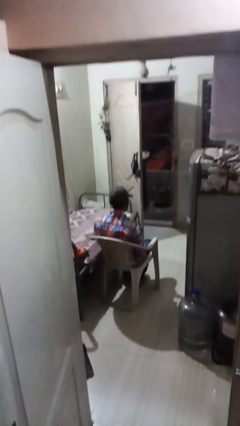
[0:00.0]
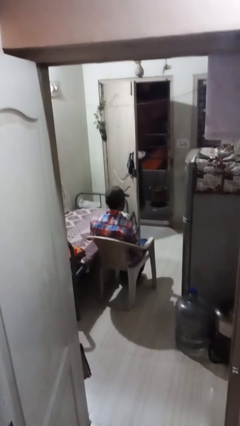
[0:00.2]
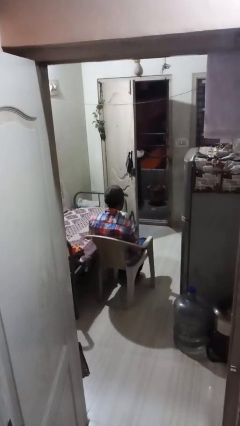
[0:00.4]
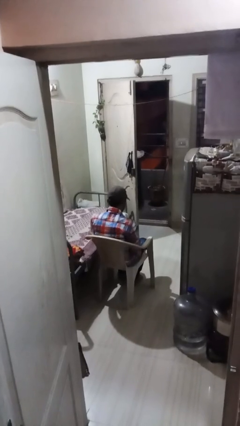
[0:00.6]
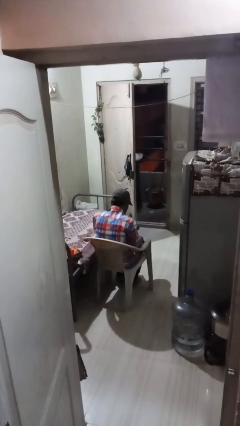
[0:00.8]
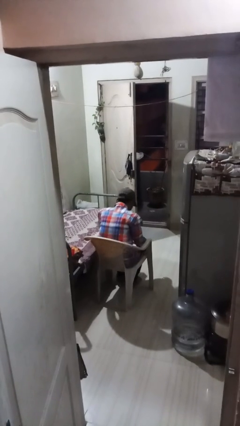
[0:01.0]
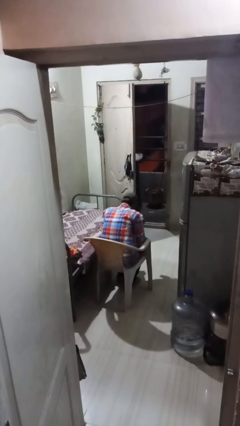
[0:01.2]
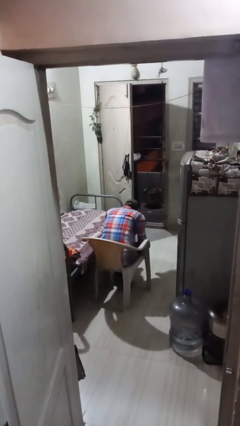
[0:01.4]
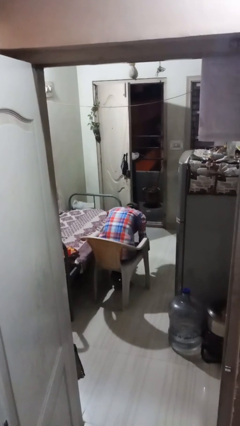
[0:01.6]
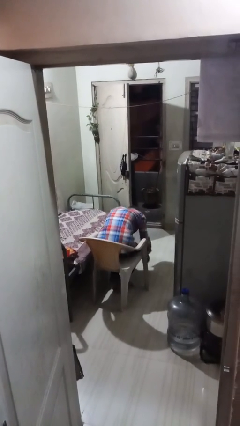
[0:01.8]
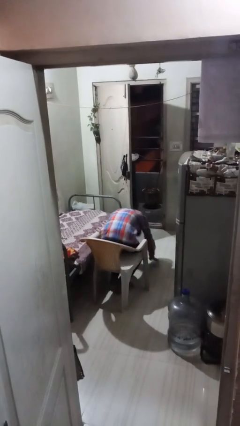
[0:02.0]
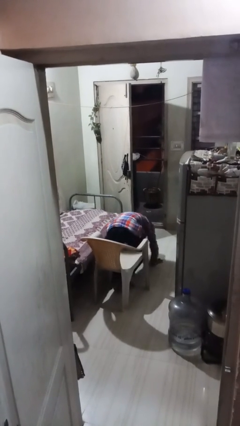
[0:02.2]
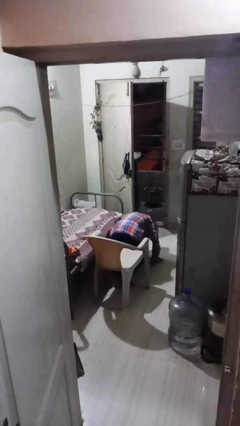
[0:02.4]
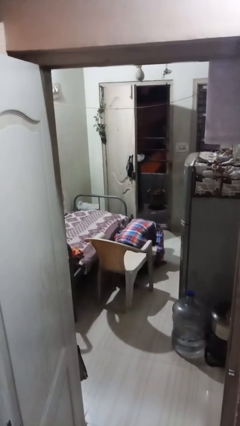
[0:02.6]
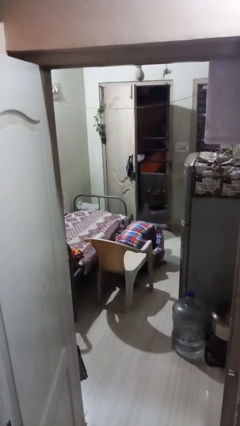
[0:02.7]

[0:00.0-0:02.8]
person falls from chair

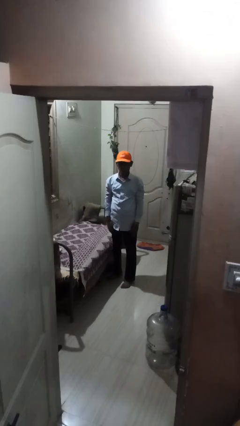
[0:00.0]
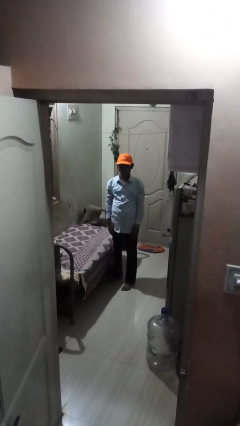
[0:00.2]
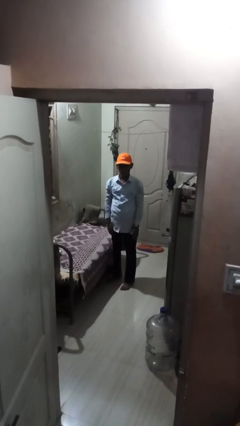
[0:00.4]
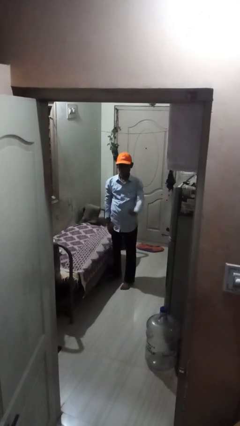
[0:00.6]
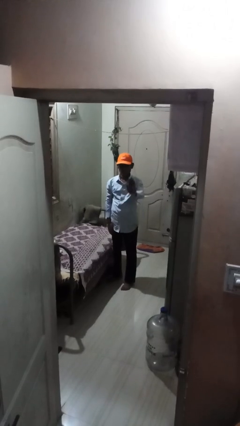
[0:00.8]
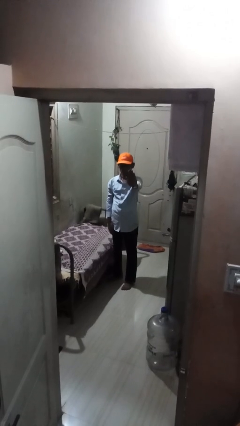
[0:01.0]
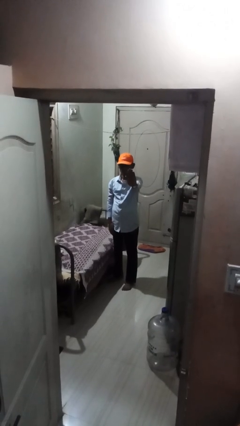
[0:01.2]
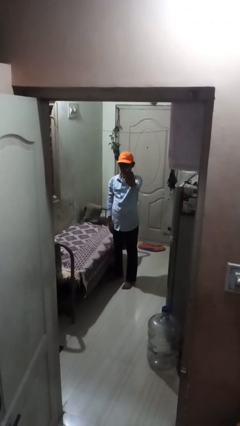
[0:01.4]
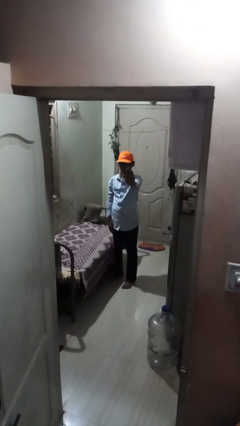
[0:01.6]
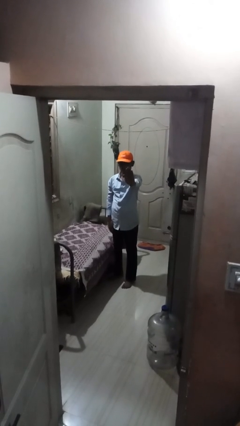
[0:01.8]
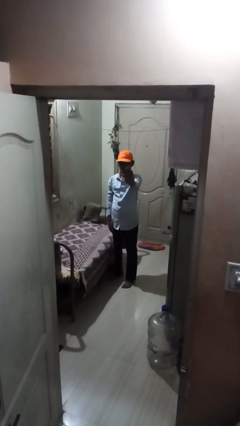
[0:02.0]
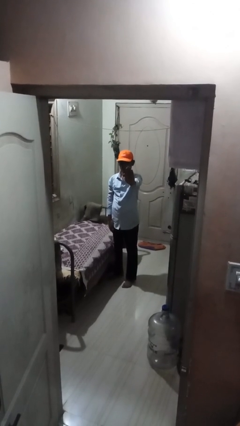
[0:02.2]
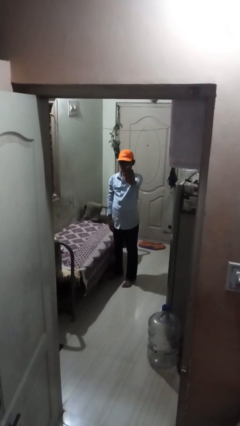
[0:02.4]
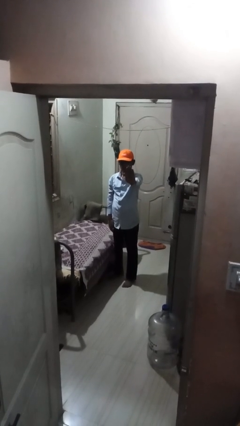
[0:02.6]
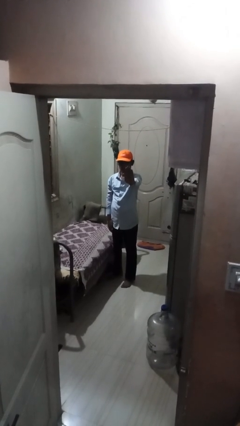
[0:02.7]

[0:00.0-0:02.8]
person gestures stop

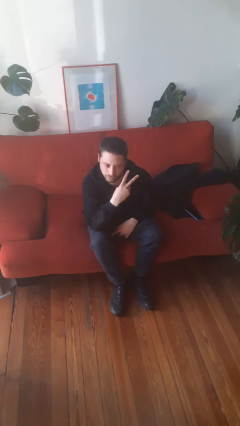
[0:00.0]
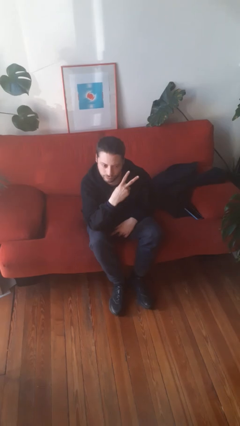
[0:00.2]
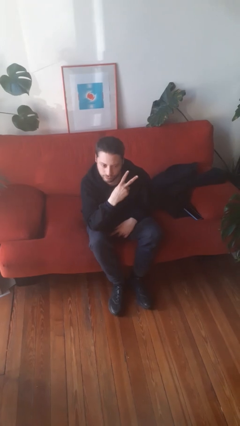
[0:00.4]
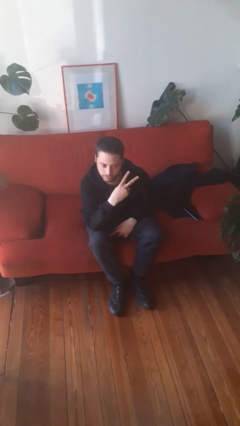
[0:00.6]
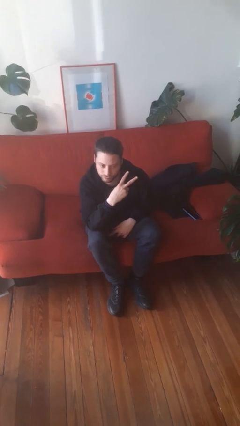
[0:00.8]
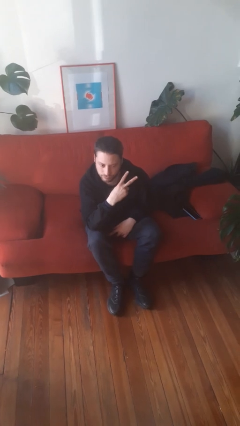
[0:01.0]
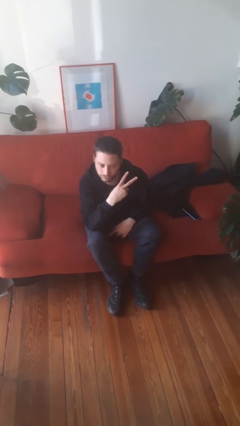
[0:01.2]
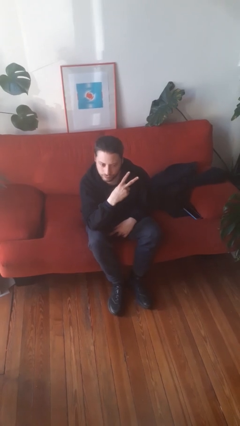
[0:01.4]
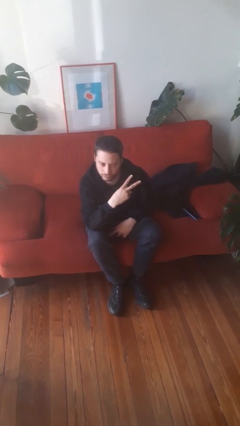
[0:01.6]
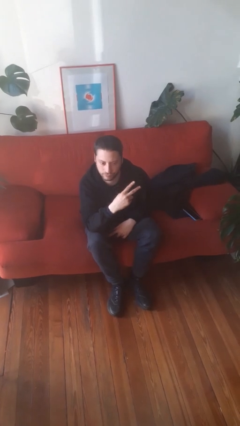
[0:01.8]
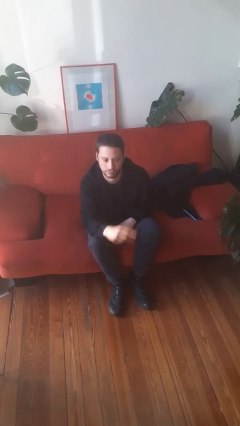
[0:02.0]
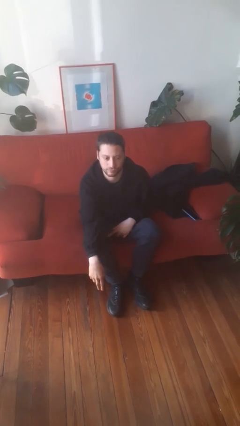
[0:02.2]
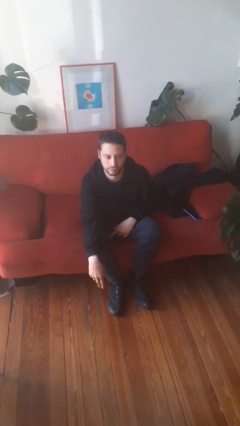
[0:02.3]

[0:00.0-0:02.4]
person gestures peace

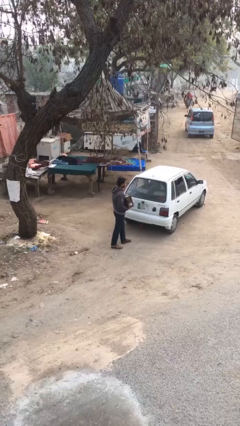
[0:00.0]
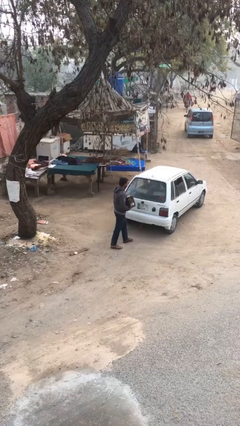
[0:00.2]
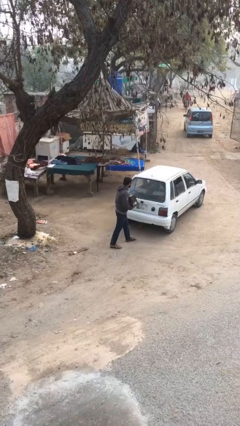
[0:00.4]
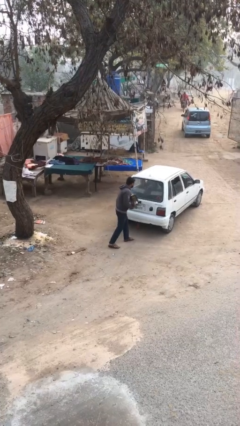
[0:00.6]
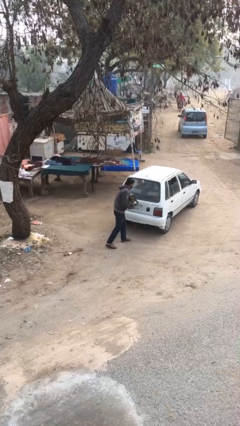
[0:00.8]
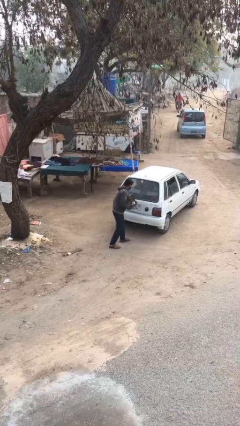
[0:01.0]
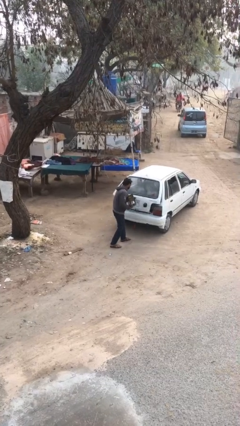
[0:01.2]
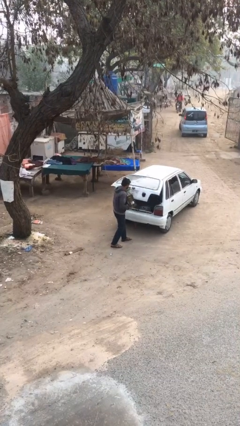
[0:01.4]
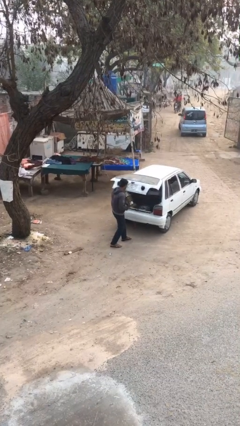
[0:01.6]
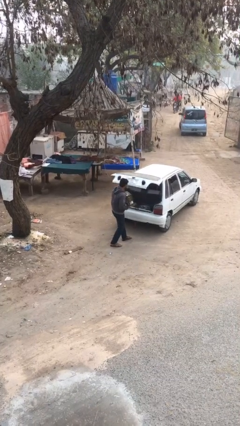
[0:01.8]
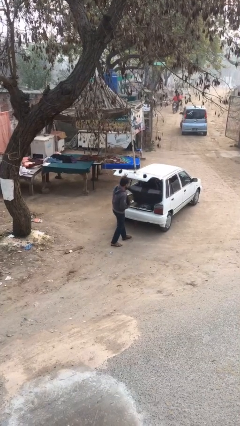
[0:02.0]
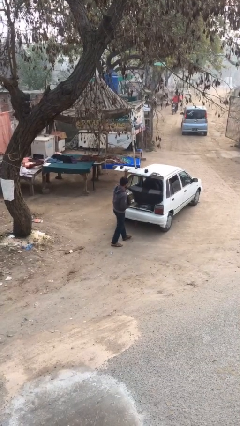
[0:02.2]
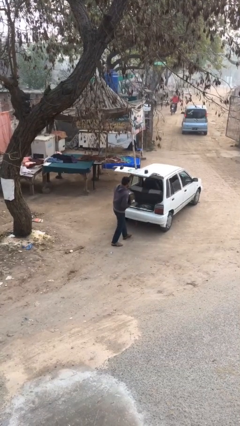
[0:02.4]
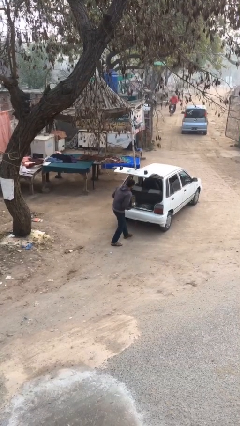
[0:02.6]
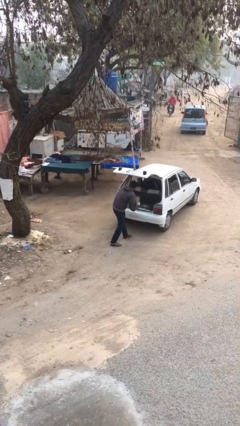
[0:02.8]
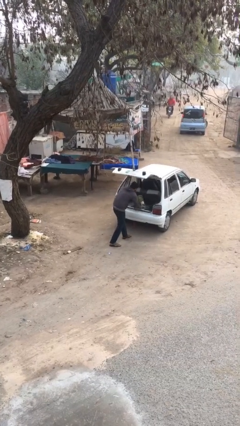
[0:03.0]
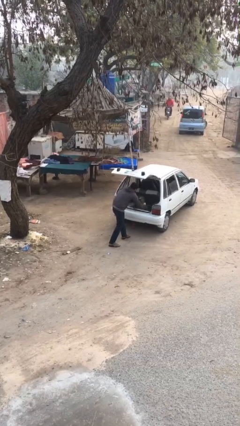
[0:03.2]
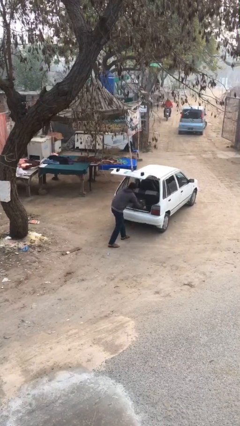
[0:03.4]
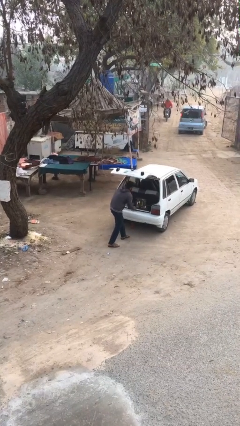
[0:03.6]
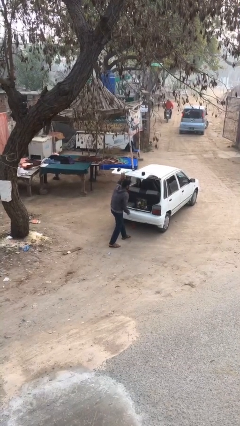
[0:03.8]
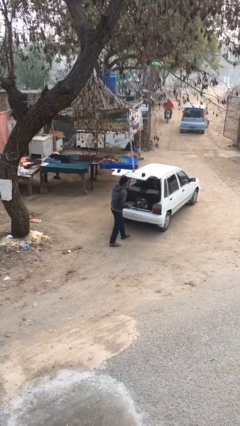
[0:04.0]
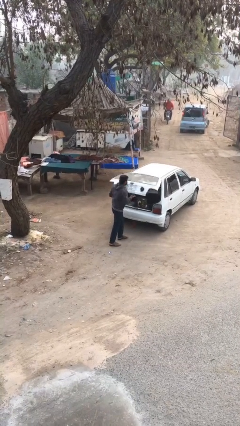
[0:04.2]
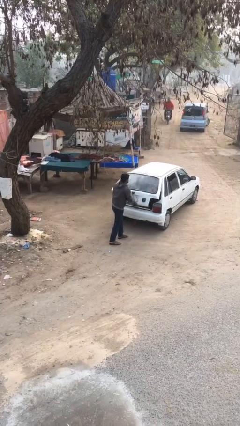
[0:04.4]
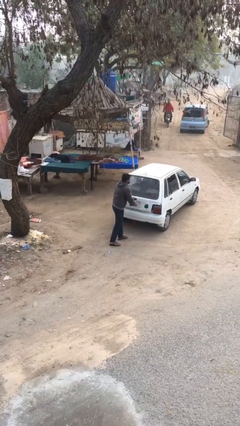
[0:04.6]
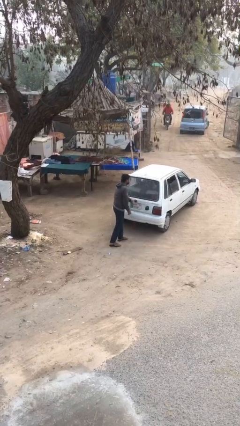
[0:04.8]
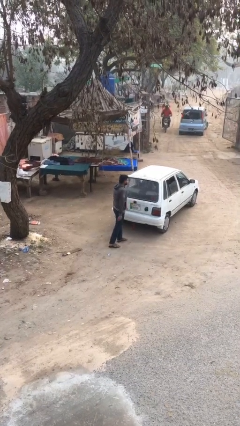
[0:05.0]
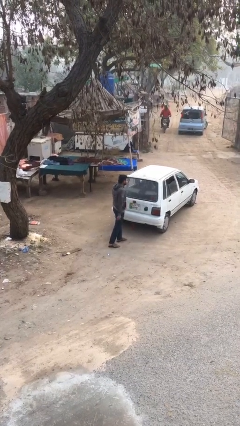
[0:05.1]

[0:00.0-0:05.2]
person loads car

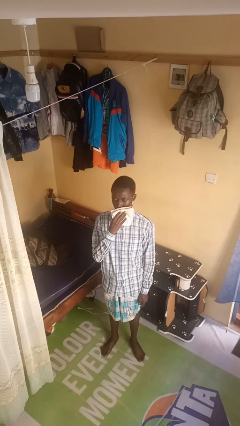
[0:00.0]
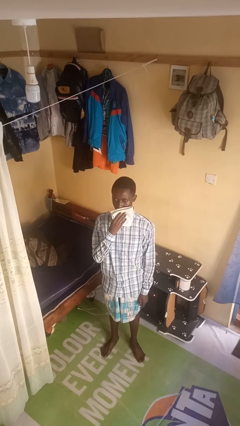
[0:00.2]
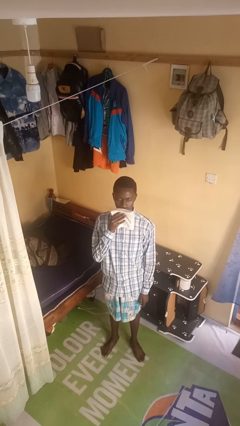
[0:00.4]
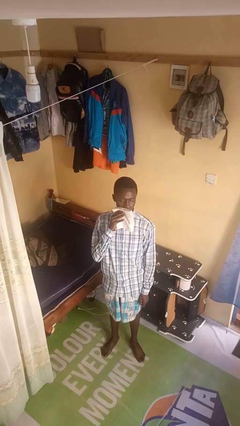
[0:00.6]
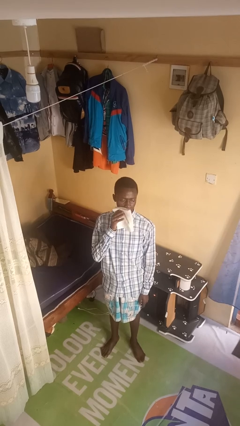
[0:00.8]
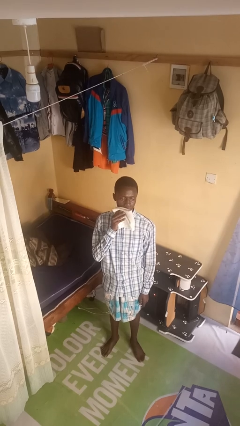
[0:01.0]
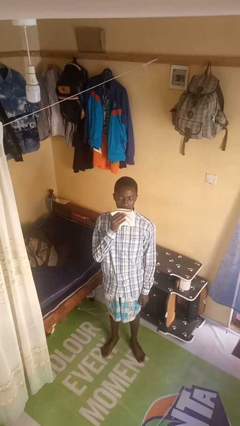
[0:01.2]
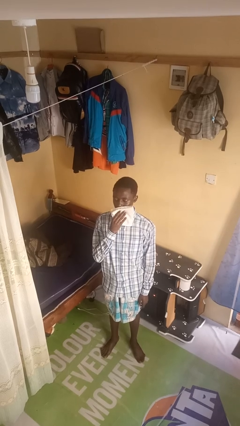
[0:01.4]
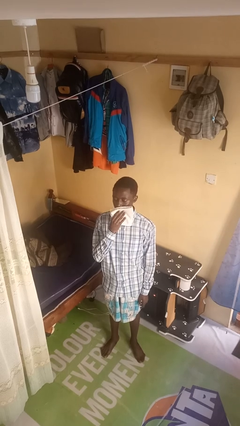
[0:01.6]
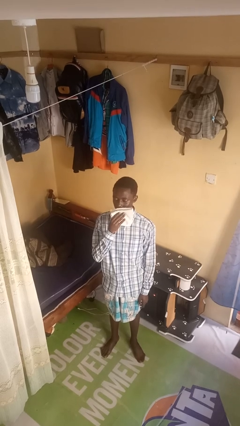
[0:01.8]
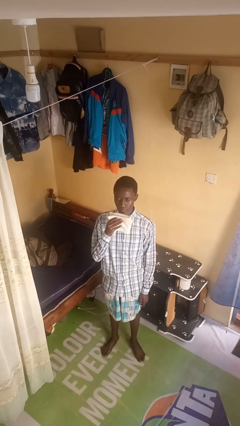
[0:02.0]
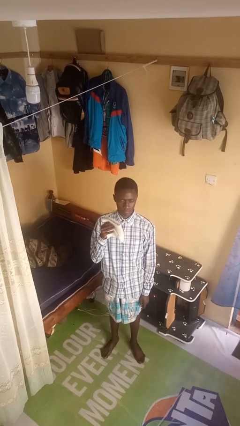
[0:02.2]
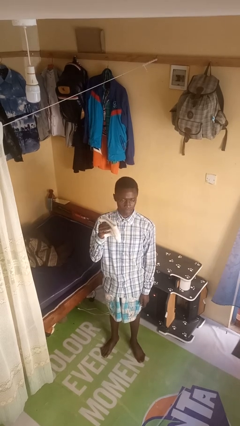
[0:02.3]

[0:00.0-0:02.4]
person wipes mouth with napkin

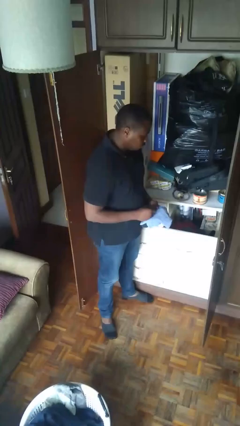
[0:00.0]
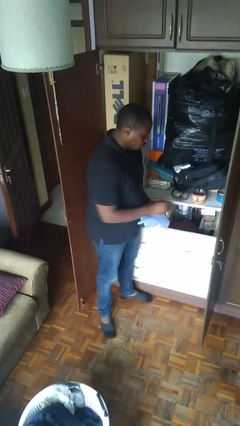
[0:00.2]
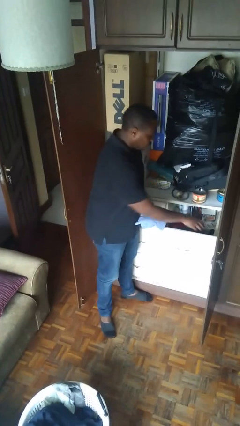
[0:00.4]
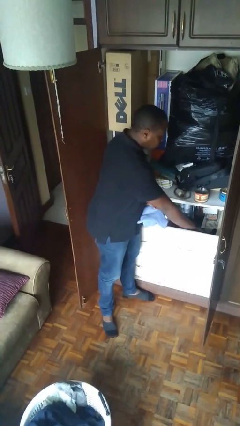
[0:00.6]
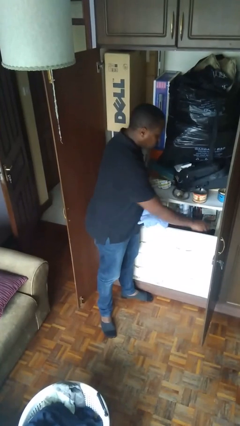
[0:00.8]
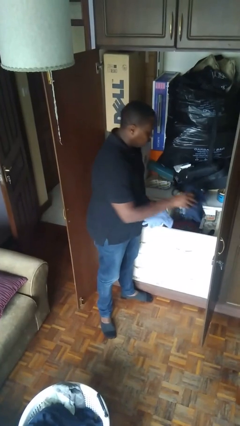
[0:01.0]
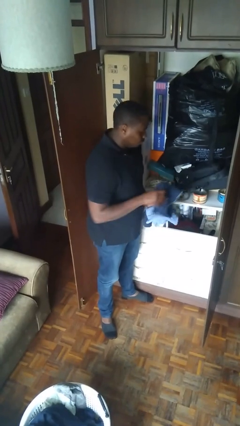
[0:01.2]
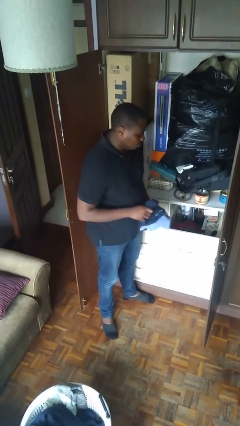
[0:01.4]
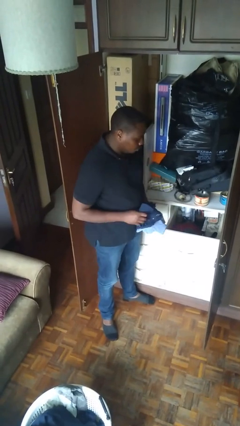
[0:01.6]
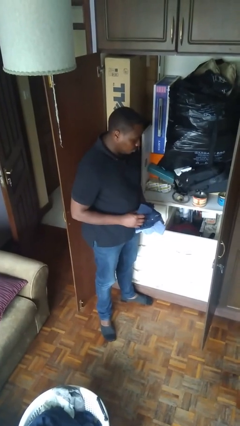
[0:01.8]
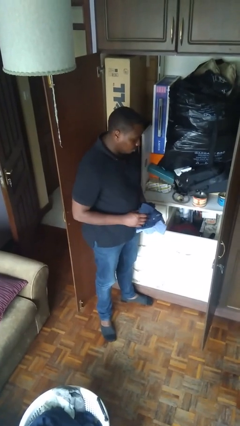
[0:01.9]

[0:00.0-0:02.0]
person takes clothes from dresser
